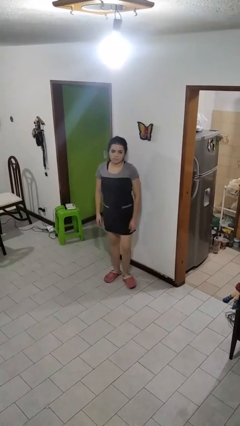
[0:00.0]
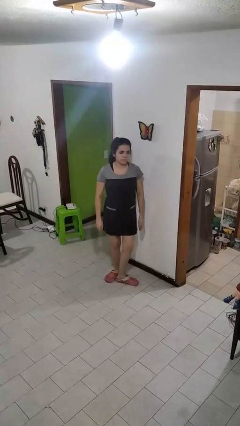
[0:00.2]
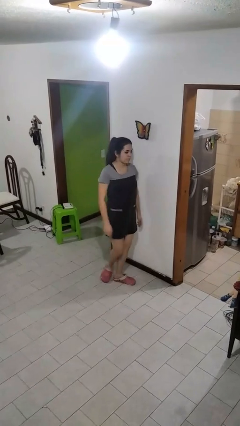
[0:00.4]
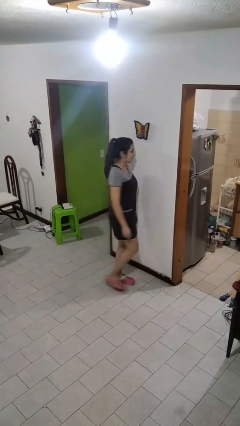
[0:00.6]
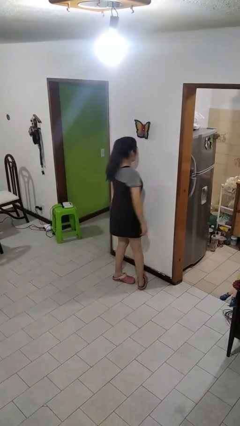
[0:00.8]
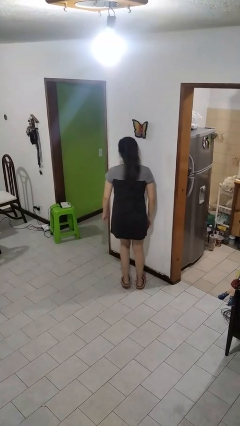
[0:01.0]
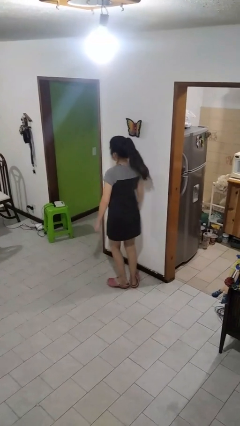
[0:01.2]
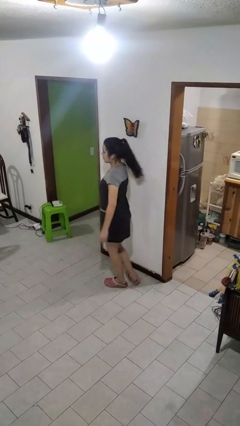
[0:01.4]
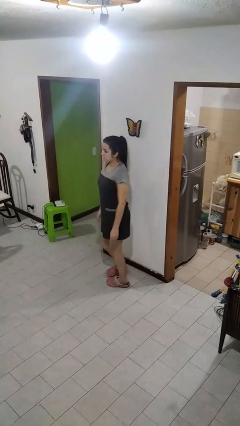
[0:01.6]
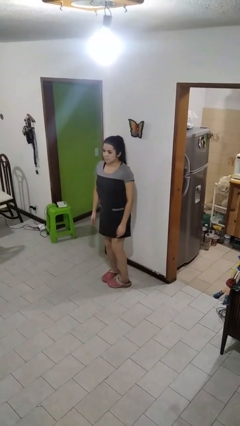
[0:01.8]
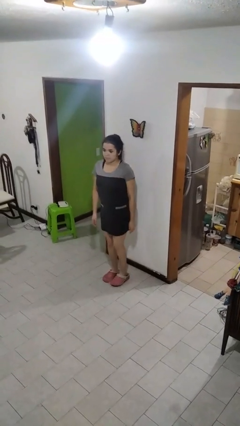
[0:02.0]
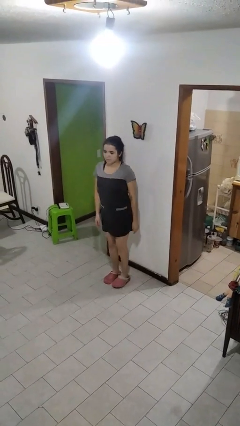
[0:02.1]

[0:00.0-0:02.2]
person twirls

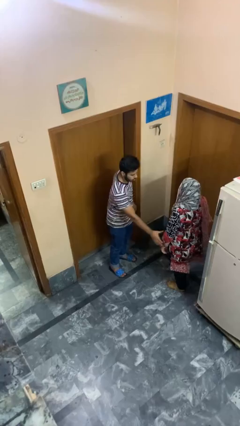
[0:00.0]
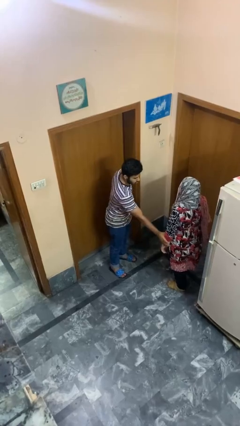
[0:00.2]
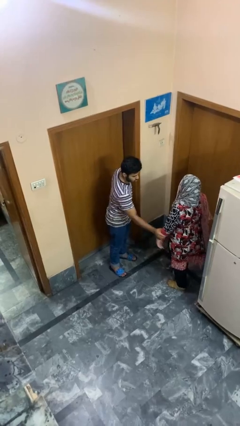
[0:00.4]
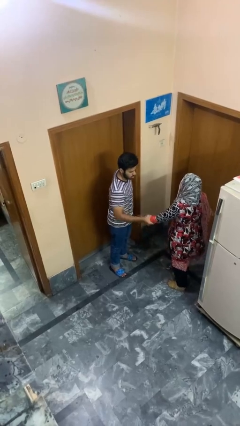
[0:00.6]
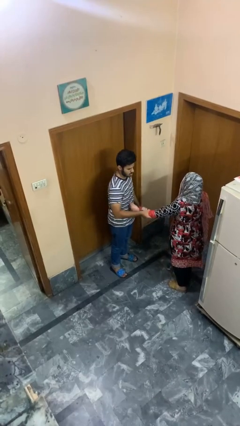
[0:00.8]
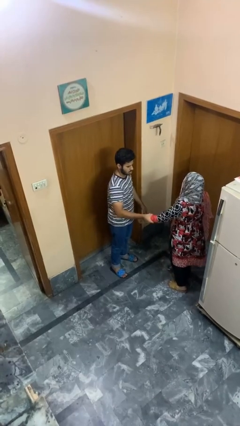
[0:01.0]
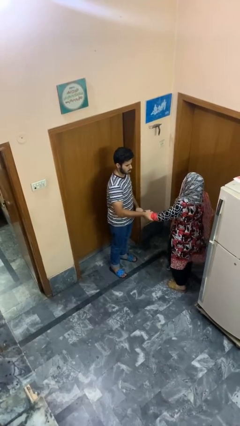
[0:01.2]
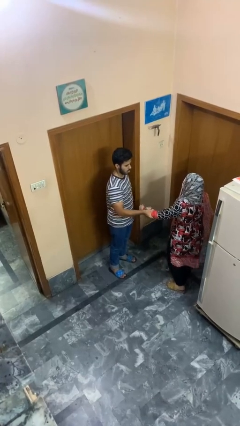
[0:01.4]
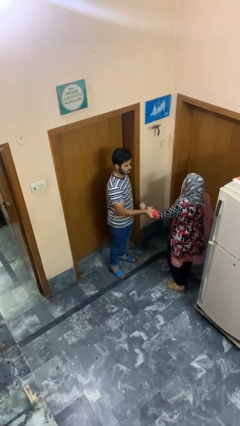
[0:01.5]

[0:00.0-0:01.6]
person grabs person by forearm

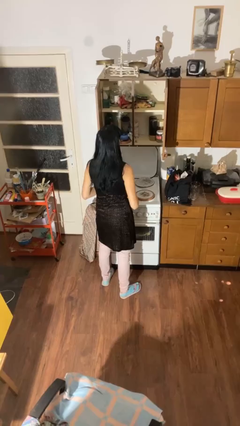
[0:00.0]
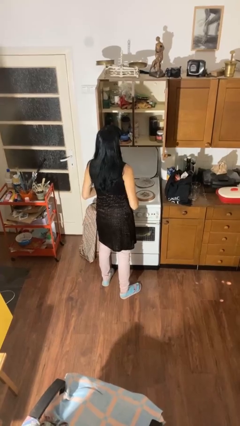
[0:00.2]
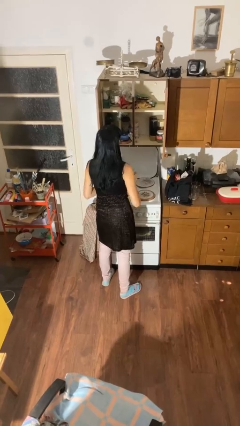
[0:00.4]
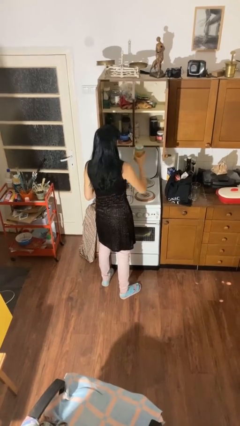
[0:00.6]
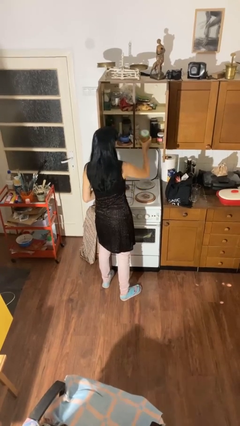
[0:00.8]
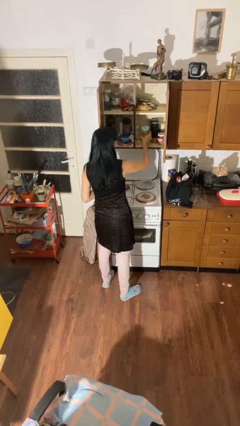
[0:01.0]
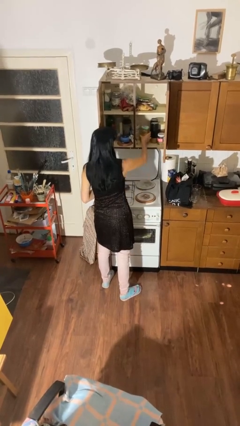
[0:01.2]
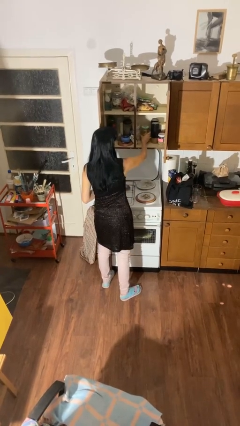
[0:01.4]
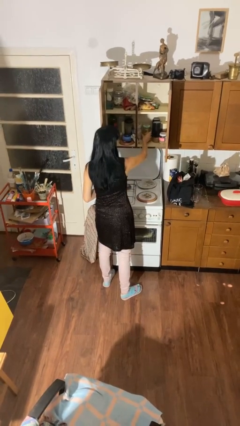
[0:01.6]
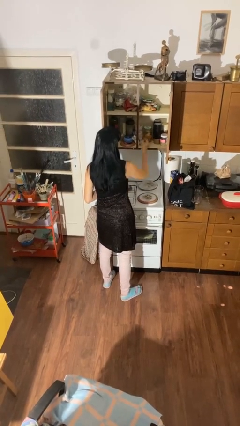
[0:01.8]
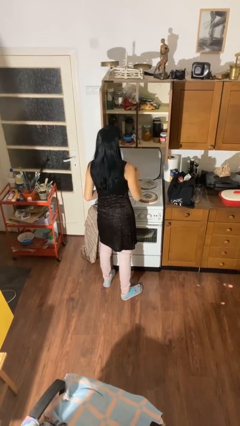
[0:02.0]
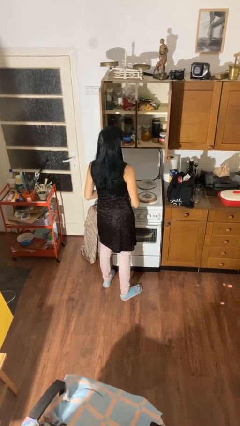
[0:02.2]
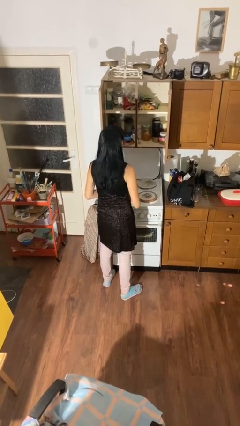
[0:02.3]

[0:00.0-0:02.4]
person puts down object into cabinet

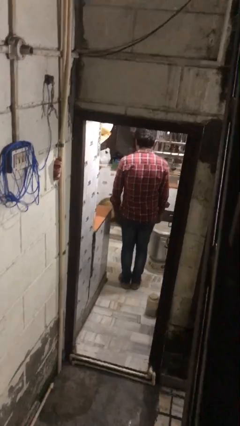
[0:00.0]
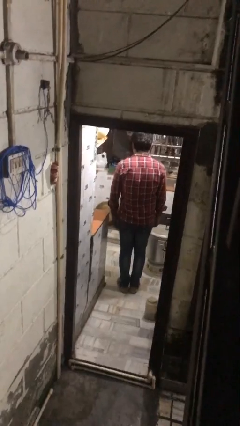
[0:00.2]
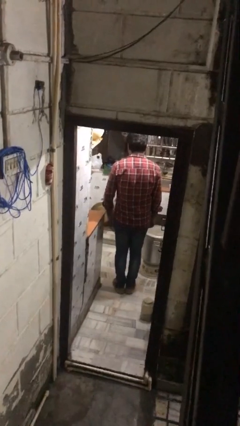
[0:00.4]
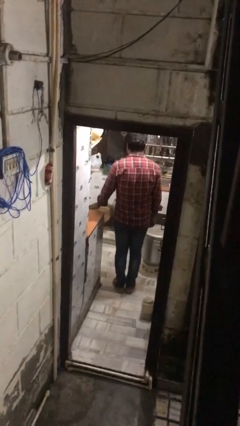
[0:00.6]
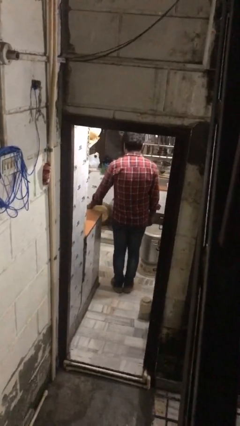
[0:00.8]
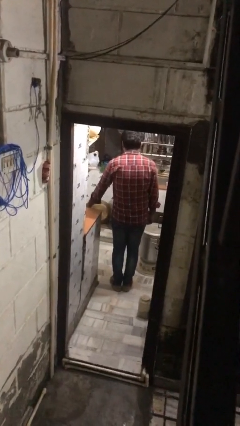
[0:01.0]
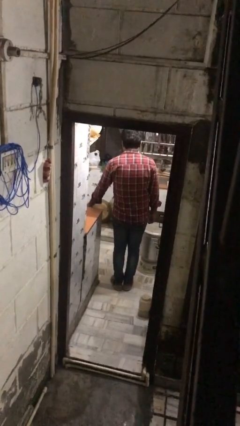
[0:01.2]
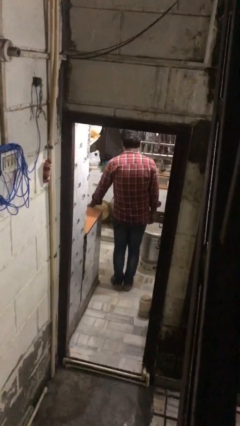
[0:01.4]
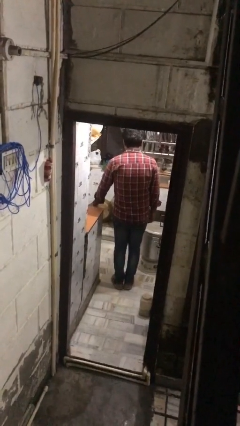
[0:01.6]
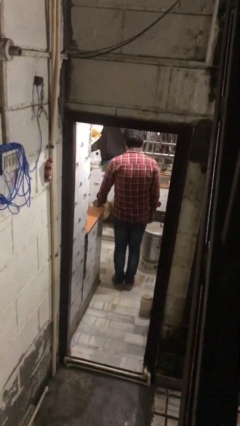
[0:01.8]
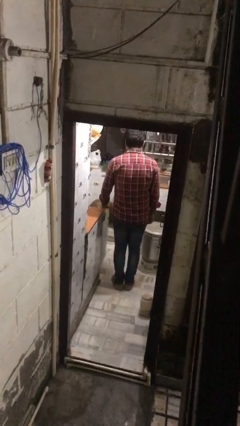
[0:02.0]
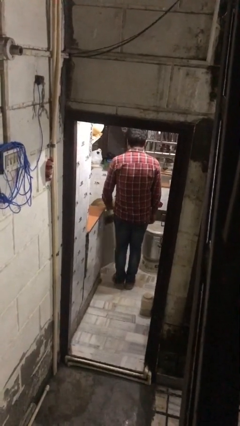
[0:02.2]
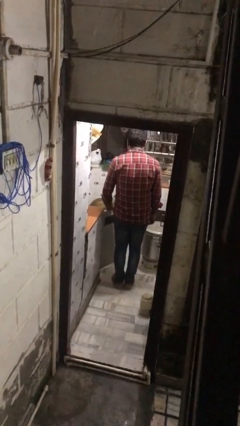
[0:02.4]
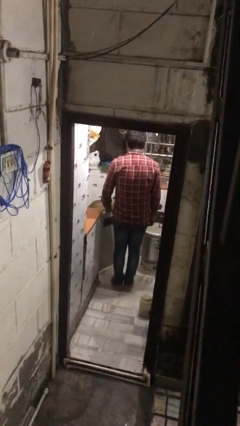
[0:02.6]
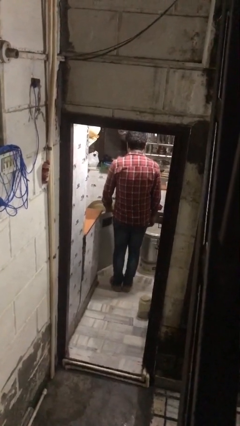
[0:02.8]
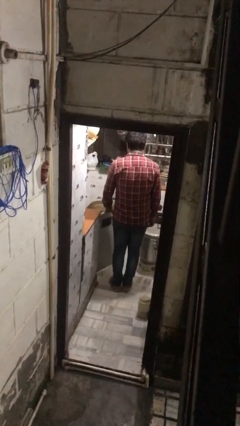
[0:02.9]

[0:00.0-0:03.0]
person opens kitchen drawer

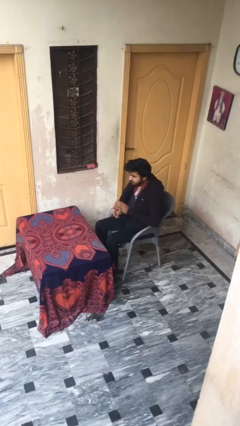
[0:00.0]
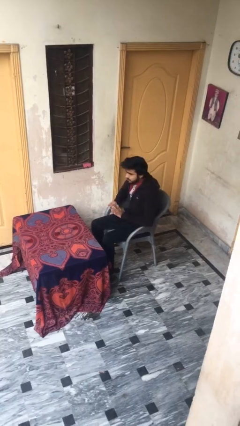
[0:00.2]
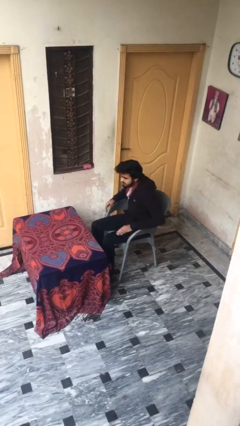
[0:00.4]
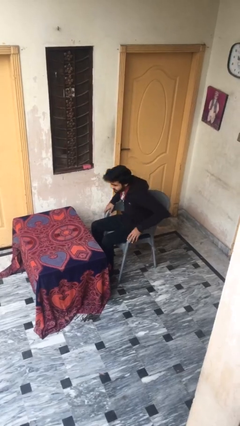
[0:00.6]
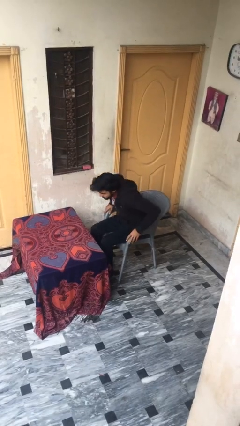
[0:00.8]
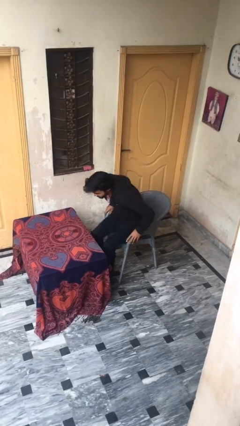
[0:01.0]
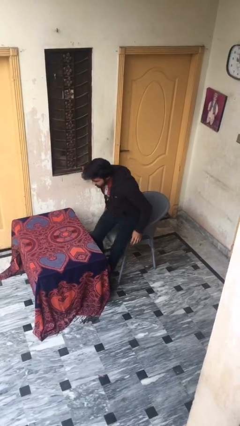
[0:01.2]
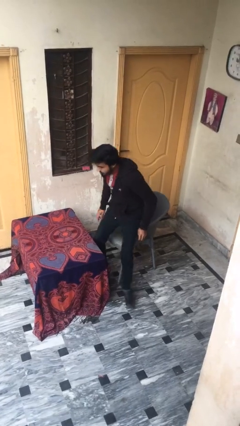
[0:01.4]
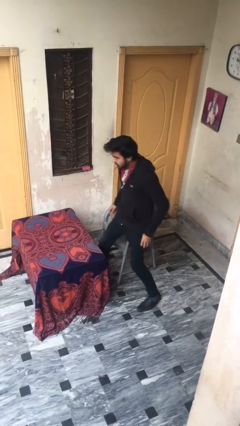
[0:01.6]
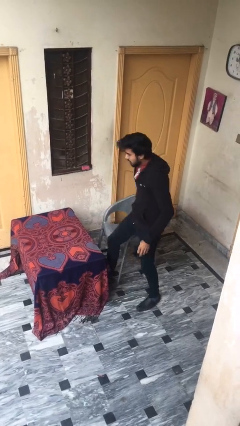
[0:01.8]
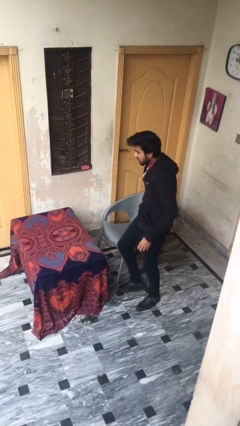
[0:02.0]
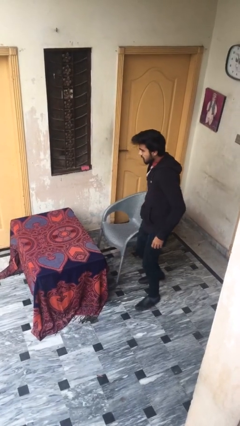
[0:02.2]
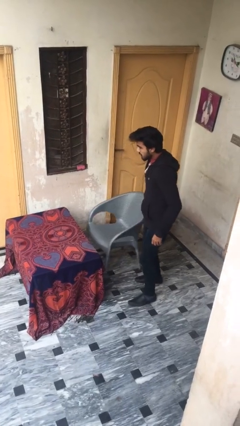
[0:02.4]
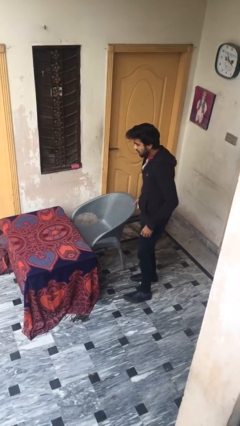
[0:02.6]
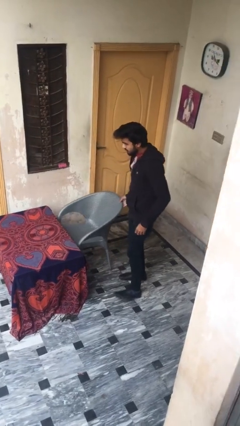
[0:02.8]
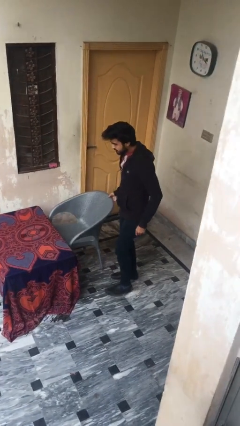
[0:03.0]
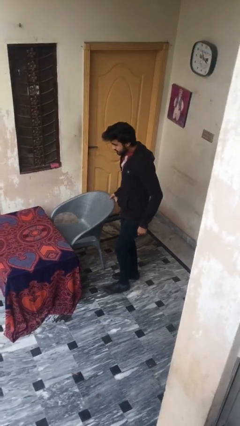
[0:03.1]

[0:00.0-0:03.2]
person stands up

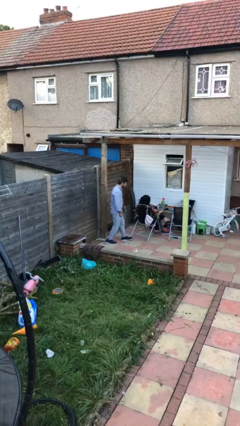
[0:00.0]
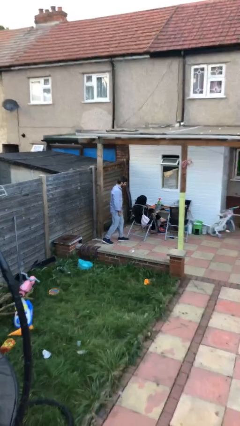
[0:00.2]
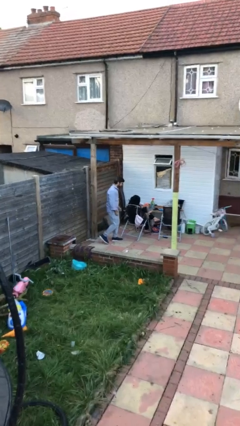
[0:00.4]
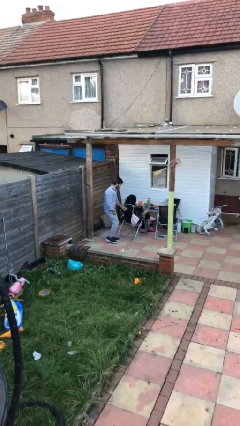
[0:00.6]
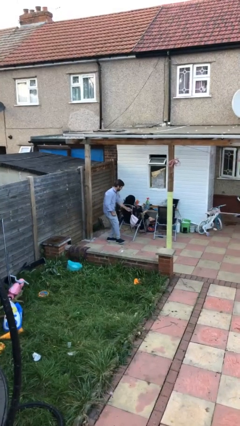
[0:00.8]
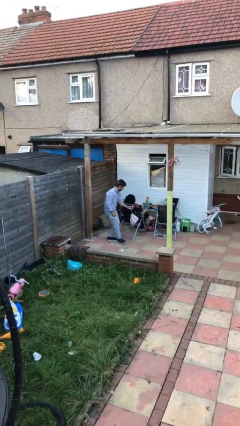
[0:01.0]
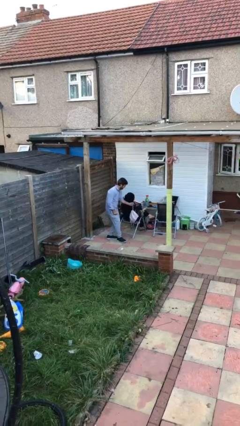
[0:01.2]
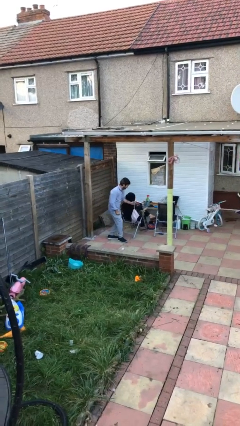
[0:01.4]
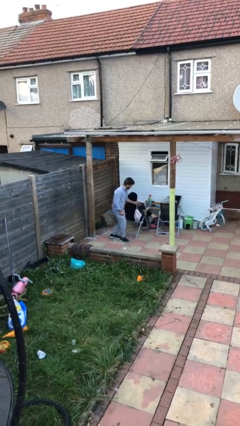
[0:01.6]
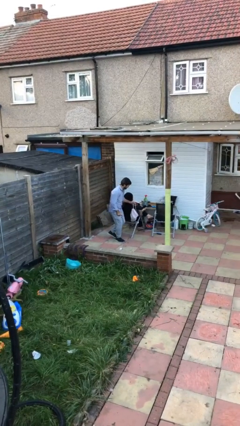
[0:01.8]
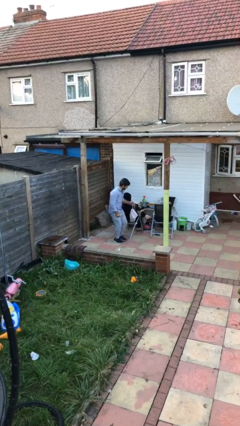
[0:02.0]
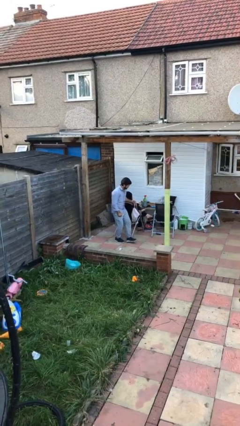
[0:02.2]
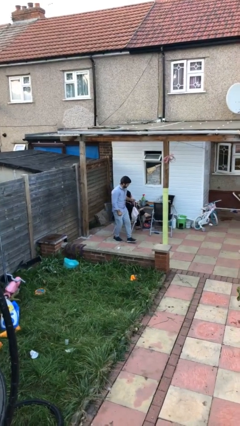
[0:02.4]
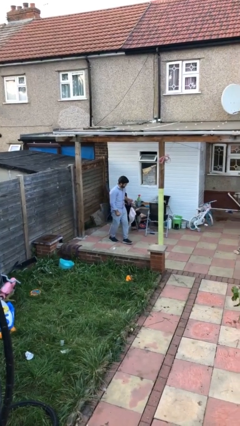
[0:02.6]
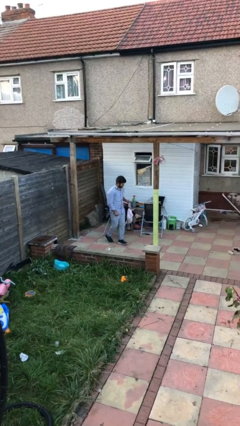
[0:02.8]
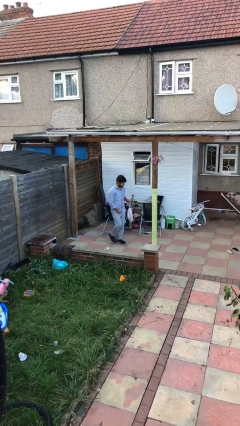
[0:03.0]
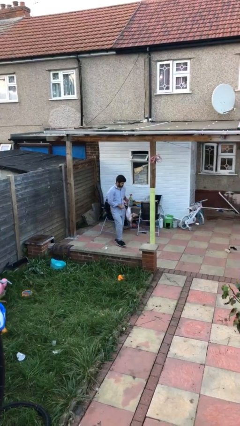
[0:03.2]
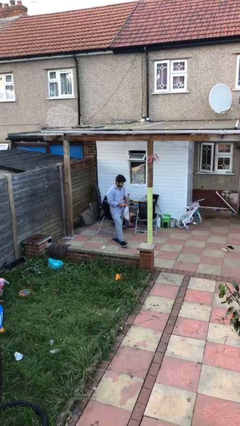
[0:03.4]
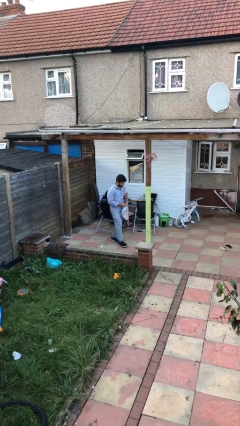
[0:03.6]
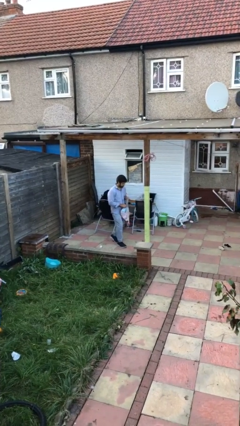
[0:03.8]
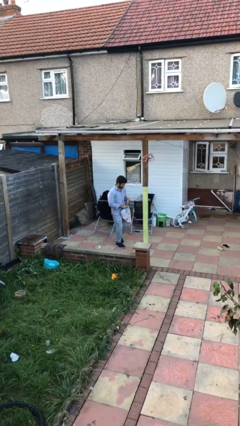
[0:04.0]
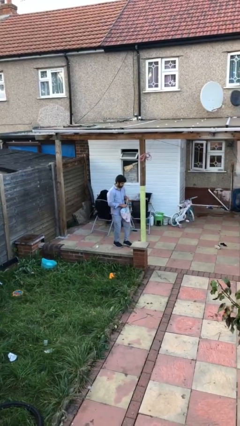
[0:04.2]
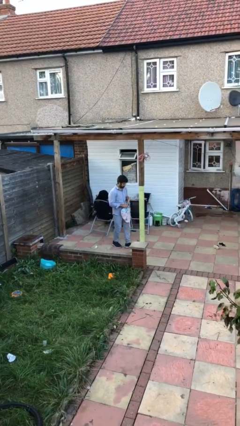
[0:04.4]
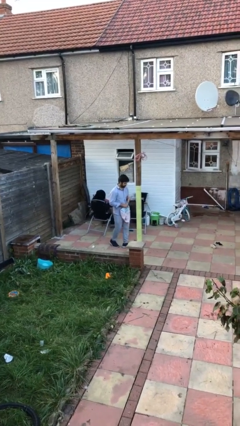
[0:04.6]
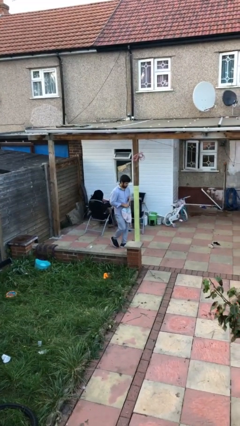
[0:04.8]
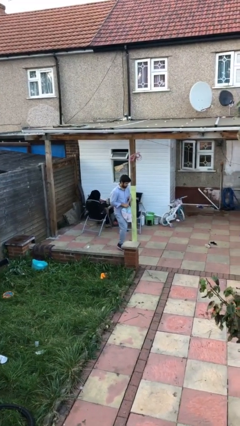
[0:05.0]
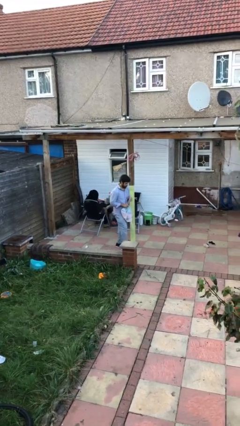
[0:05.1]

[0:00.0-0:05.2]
person steals object from person
